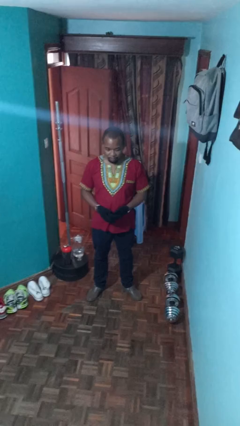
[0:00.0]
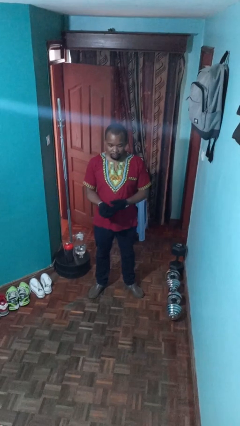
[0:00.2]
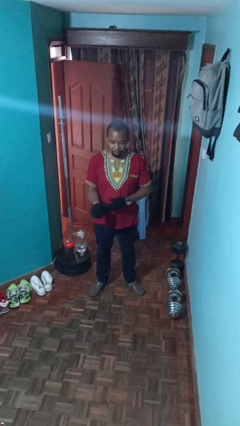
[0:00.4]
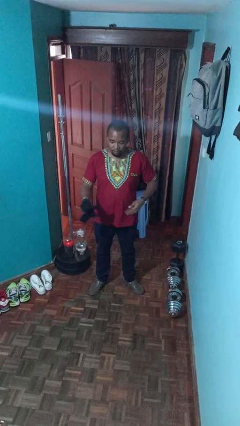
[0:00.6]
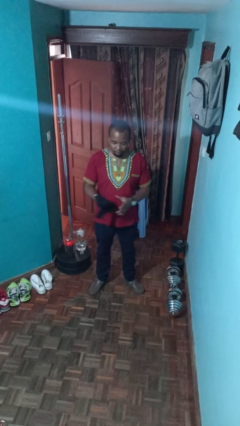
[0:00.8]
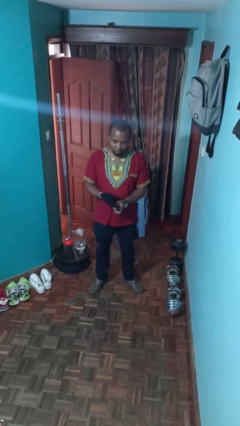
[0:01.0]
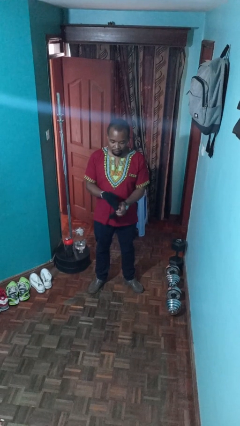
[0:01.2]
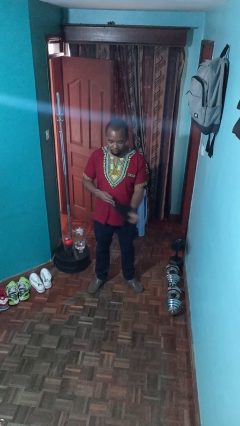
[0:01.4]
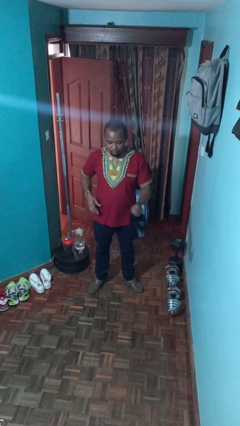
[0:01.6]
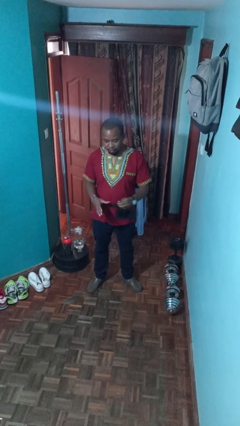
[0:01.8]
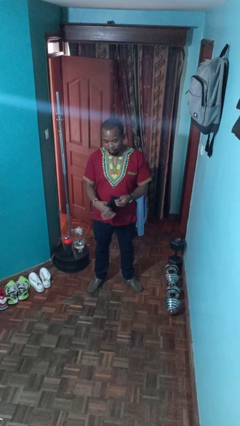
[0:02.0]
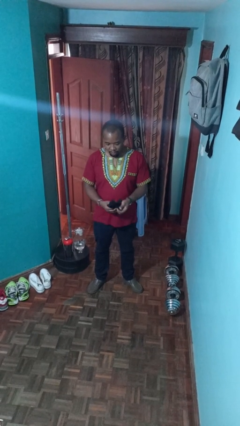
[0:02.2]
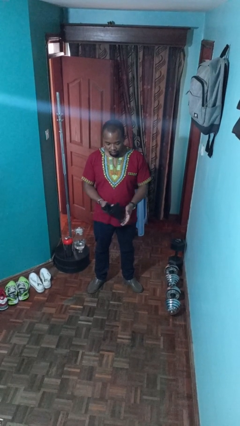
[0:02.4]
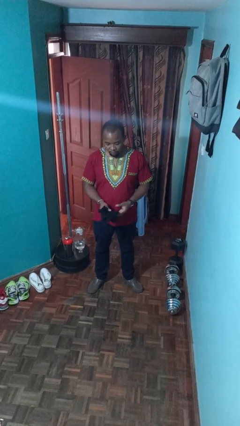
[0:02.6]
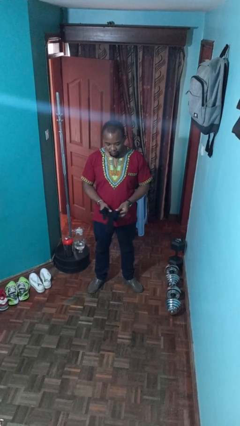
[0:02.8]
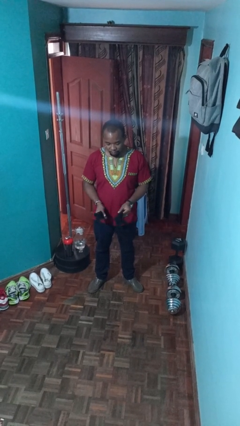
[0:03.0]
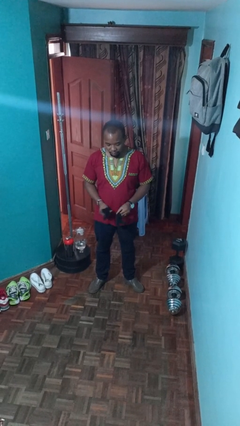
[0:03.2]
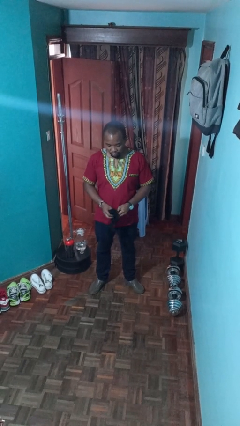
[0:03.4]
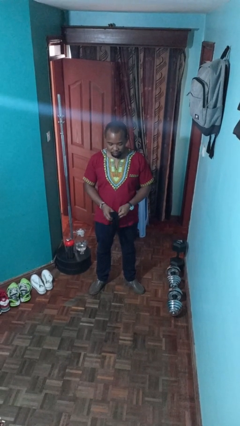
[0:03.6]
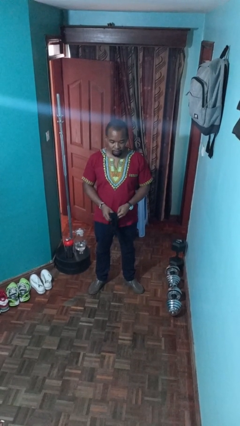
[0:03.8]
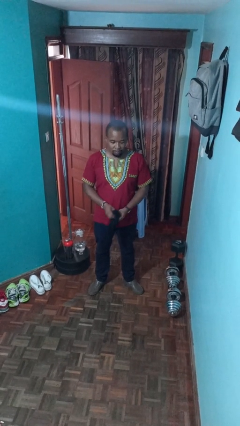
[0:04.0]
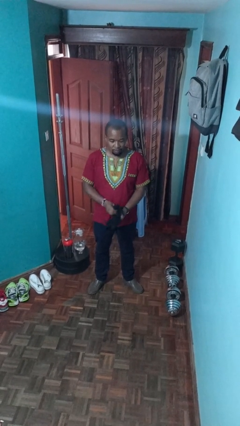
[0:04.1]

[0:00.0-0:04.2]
person takes off gloves

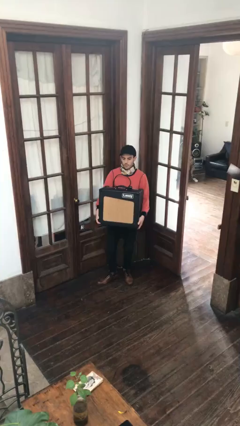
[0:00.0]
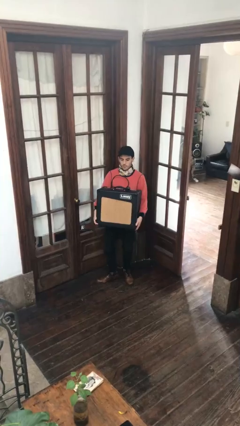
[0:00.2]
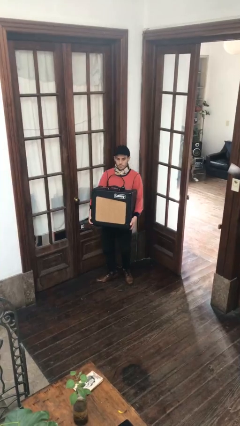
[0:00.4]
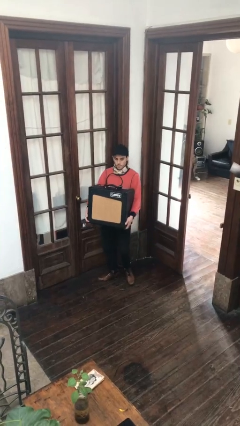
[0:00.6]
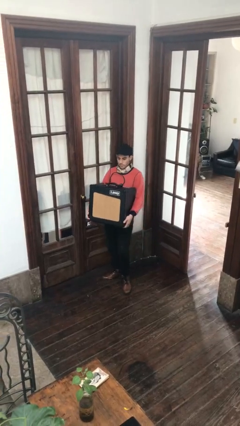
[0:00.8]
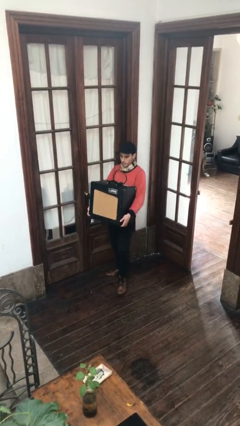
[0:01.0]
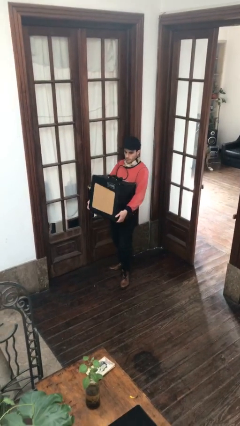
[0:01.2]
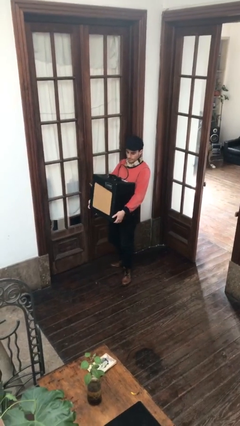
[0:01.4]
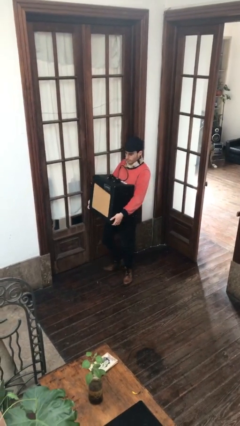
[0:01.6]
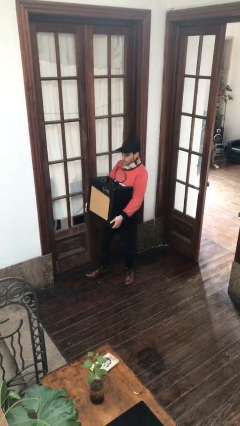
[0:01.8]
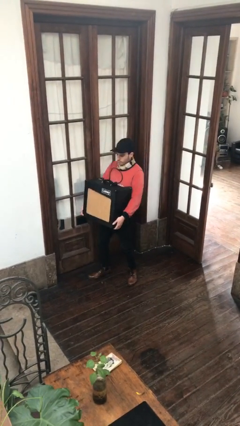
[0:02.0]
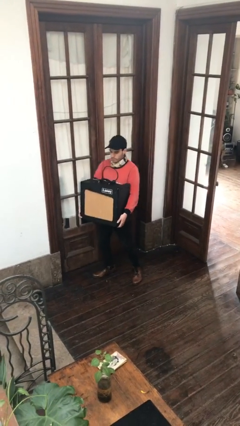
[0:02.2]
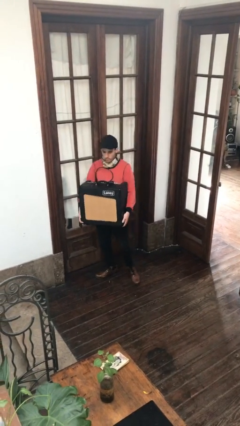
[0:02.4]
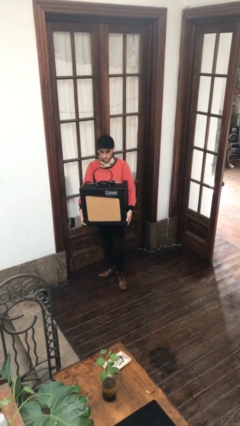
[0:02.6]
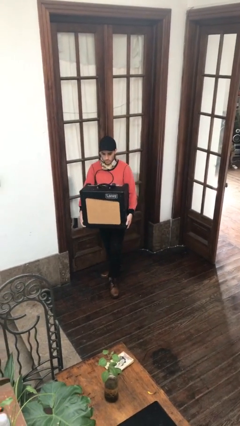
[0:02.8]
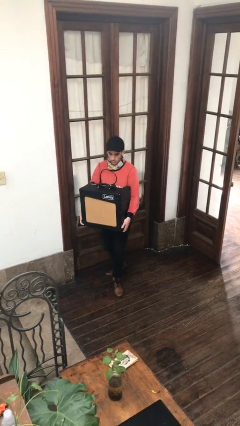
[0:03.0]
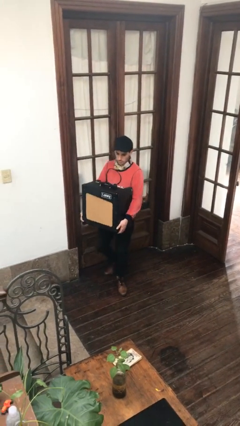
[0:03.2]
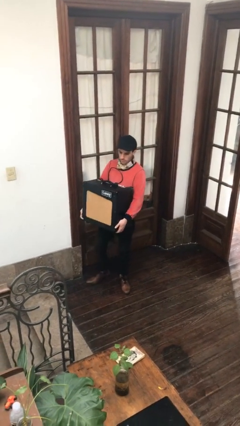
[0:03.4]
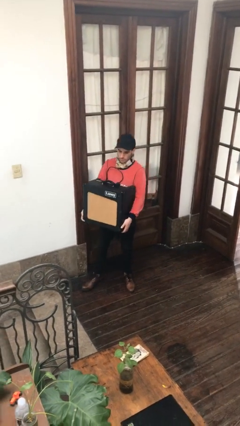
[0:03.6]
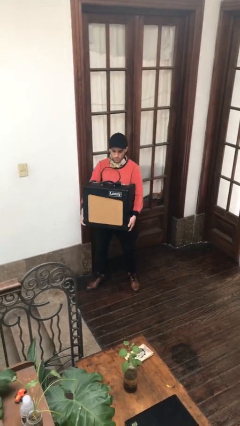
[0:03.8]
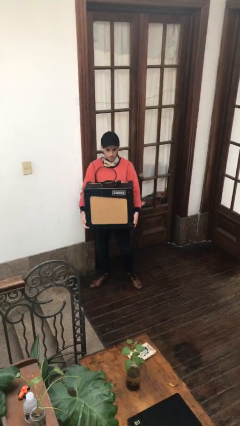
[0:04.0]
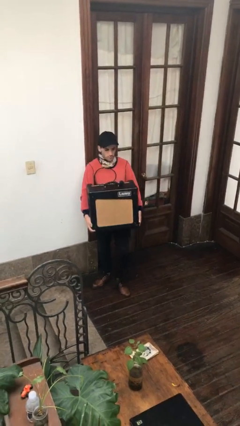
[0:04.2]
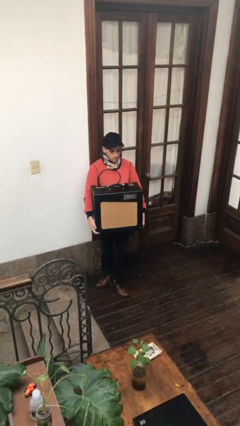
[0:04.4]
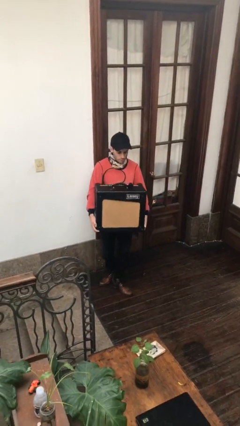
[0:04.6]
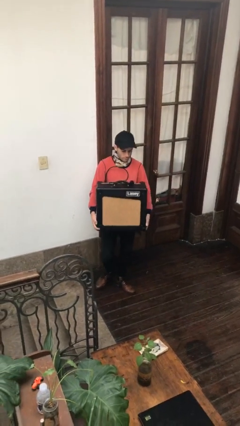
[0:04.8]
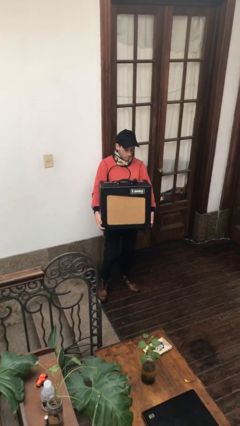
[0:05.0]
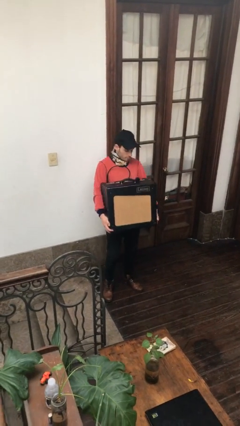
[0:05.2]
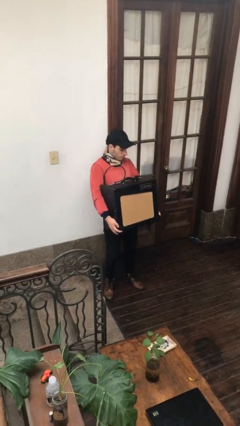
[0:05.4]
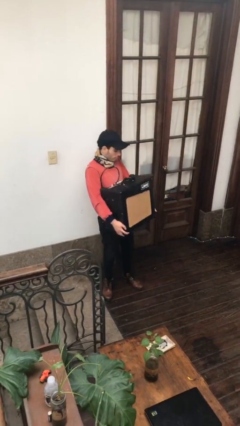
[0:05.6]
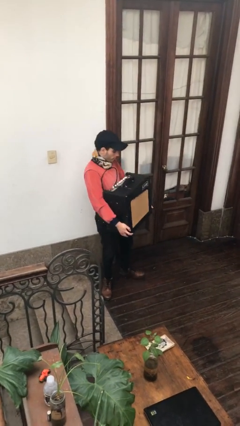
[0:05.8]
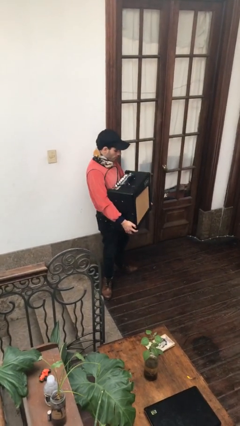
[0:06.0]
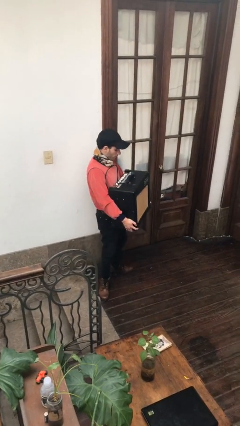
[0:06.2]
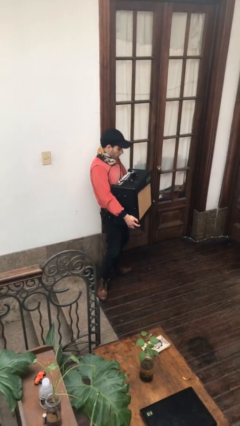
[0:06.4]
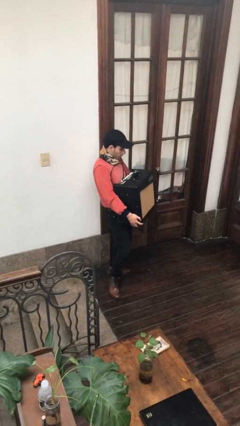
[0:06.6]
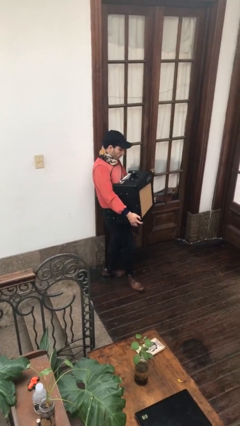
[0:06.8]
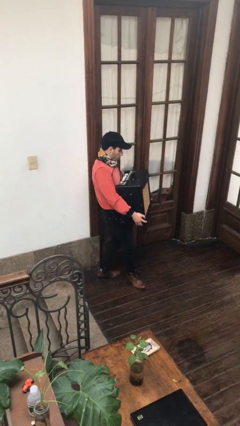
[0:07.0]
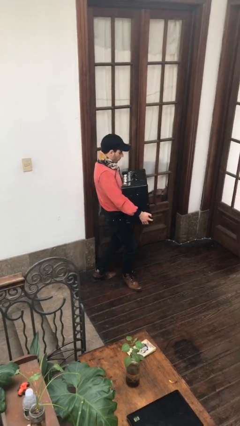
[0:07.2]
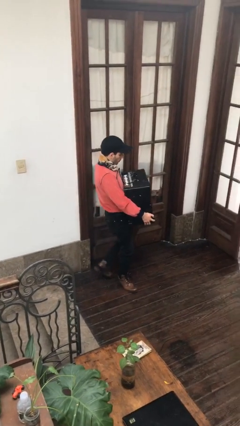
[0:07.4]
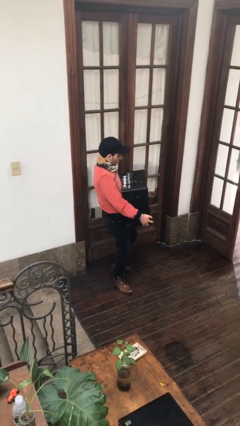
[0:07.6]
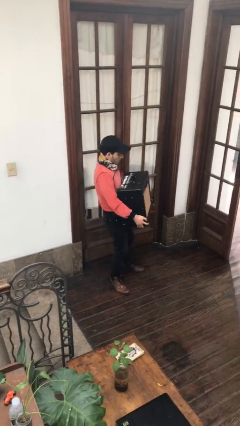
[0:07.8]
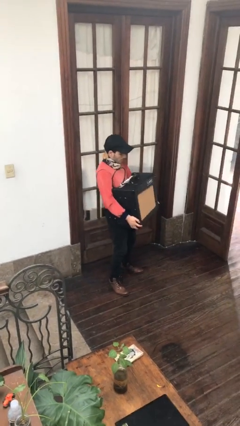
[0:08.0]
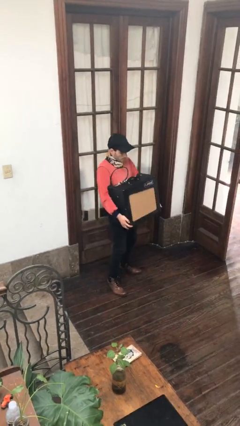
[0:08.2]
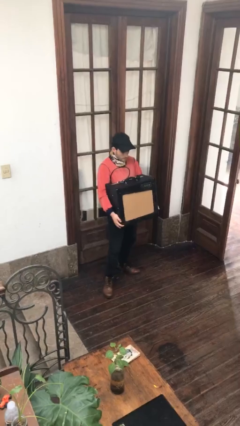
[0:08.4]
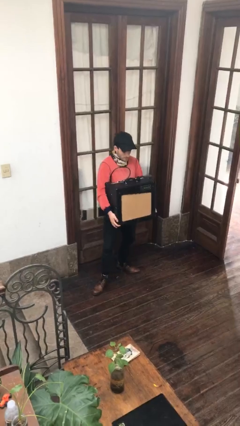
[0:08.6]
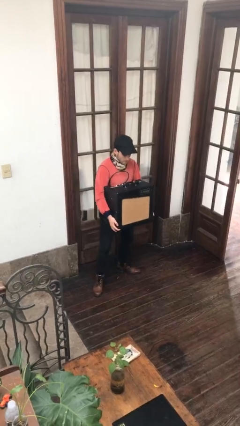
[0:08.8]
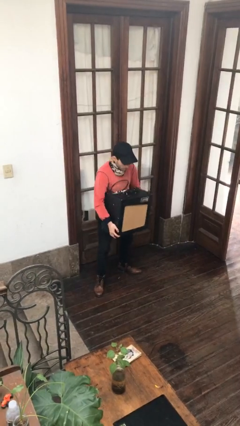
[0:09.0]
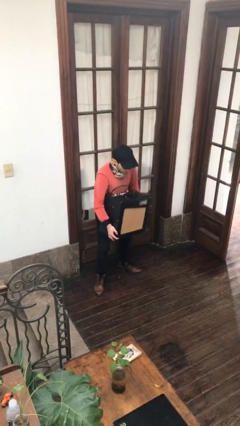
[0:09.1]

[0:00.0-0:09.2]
person carries heavy object

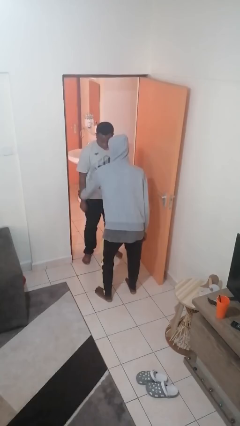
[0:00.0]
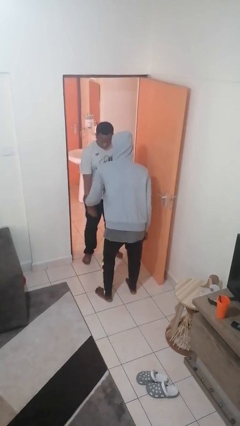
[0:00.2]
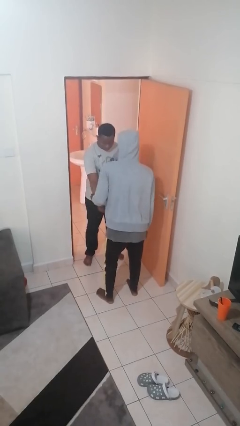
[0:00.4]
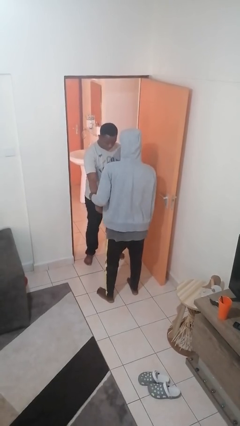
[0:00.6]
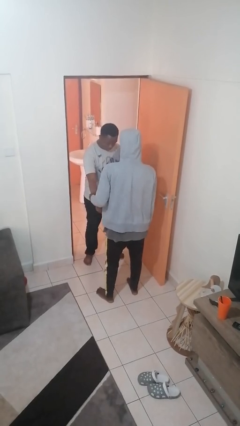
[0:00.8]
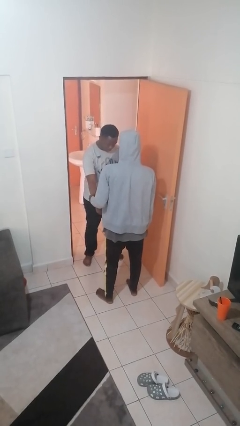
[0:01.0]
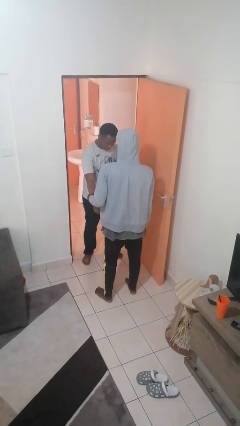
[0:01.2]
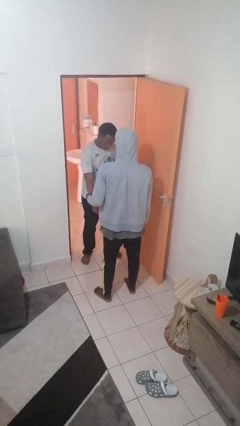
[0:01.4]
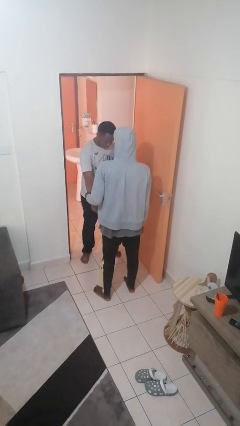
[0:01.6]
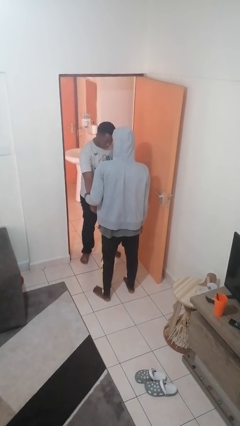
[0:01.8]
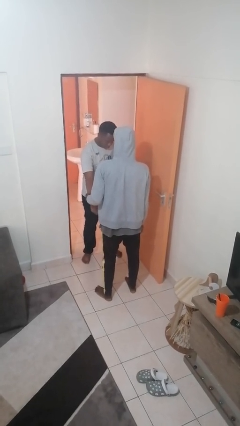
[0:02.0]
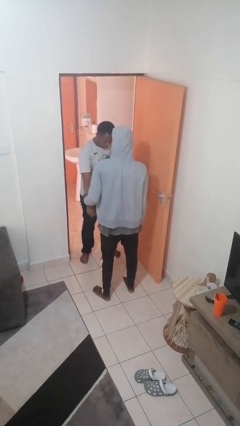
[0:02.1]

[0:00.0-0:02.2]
person grabs person by forearm

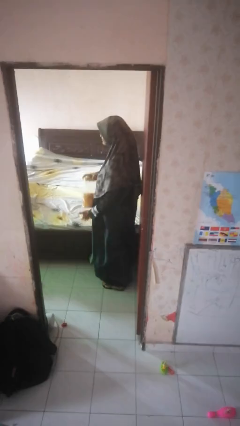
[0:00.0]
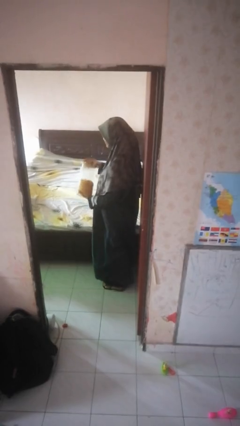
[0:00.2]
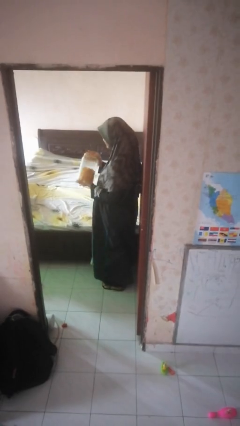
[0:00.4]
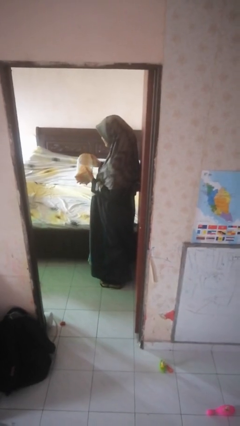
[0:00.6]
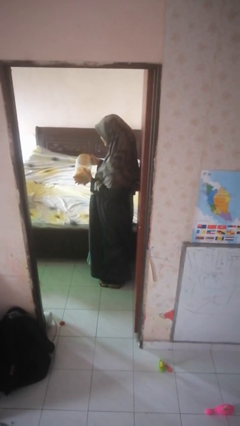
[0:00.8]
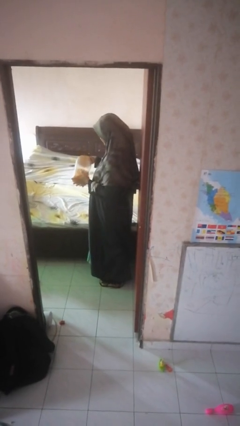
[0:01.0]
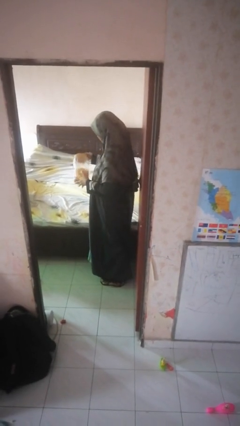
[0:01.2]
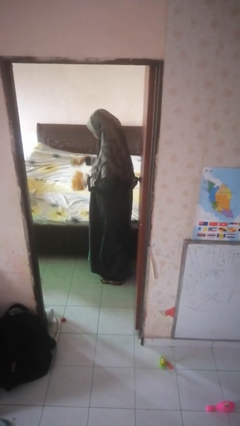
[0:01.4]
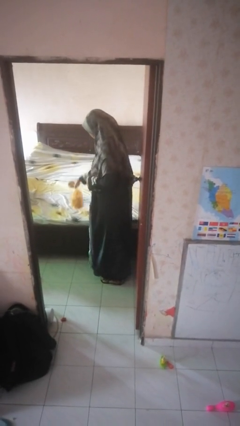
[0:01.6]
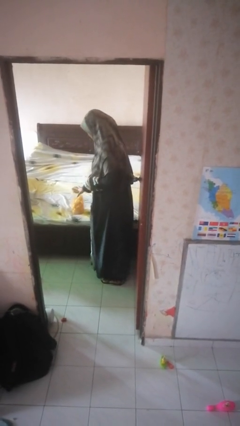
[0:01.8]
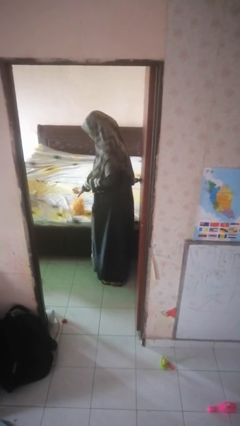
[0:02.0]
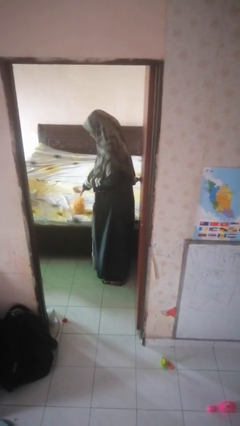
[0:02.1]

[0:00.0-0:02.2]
person puts down object on bed
